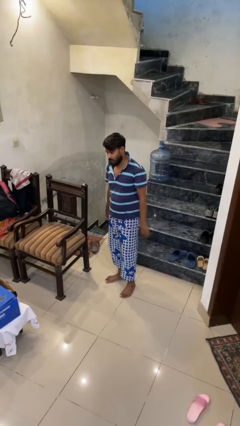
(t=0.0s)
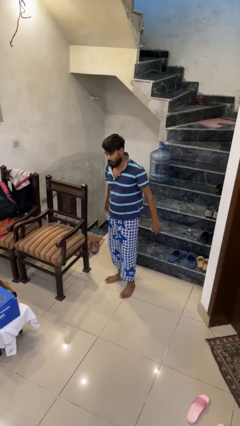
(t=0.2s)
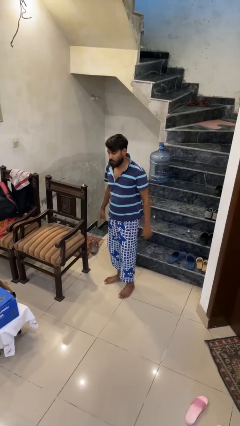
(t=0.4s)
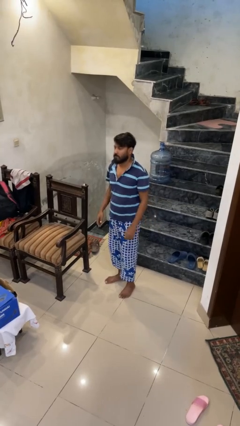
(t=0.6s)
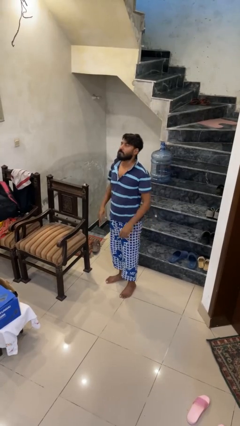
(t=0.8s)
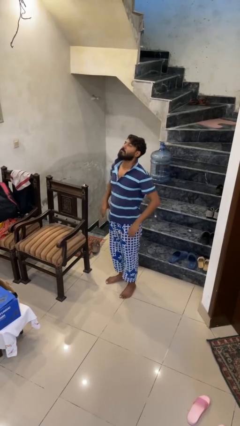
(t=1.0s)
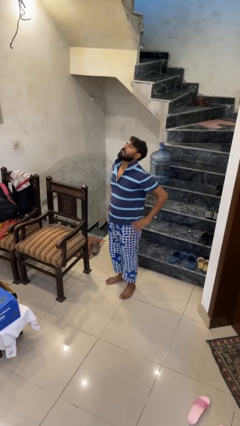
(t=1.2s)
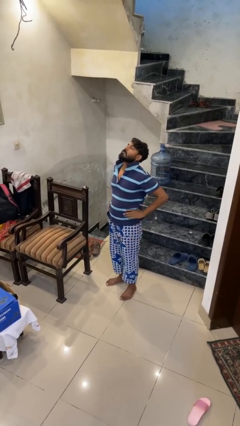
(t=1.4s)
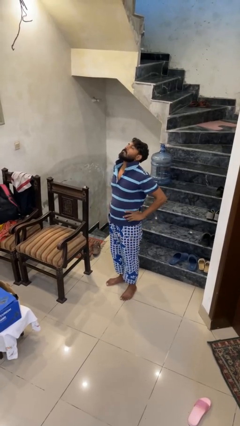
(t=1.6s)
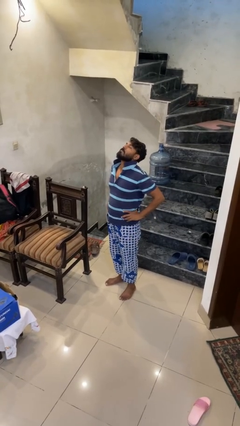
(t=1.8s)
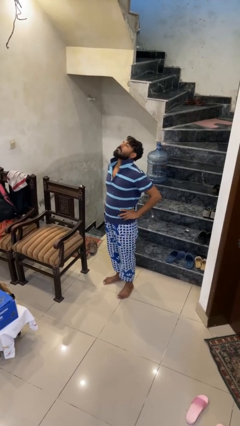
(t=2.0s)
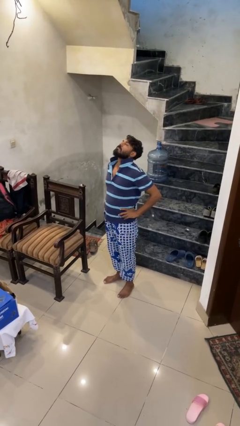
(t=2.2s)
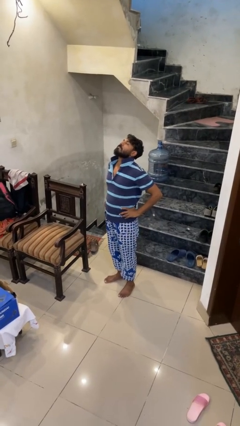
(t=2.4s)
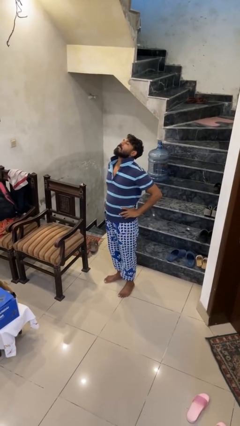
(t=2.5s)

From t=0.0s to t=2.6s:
person stretches back

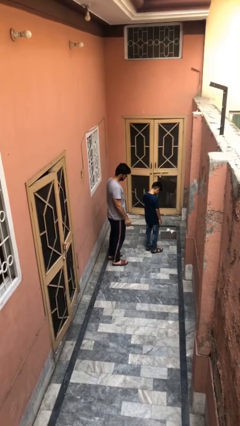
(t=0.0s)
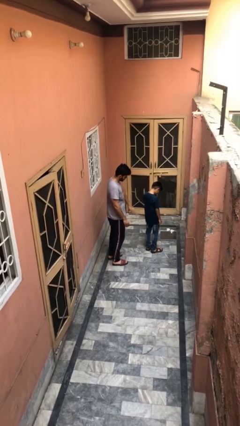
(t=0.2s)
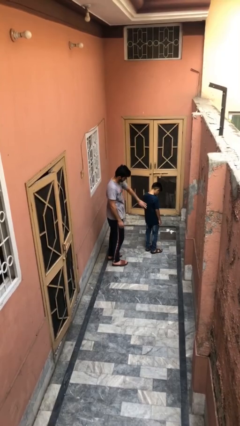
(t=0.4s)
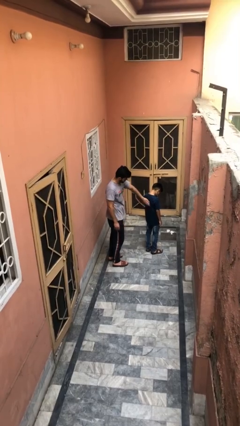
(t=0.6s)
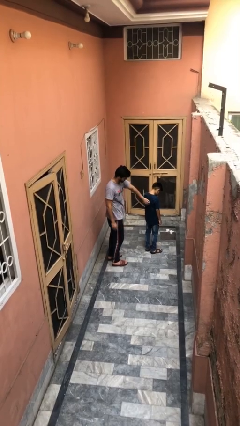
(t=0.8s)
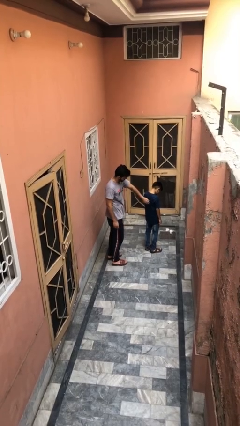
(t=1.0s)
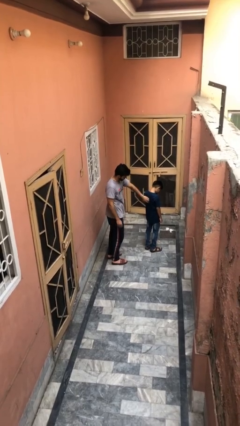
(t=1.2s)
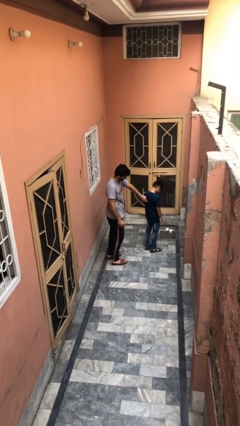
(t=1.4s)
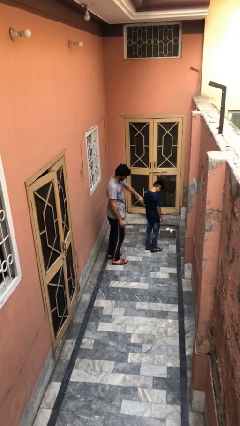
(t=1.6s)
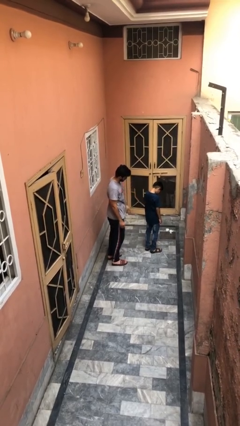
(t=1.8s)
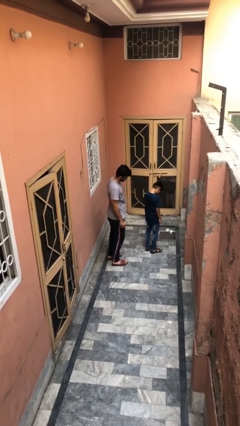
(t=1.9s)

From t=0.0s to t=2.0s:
person touches back of person

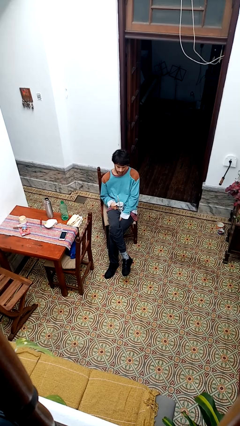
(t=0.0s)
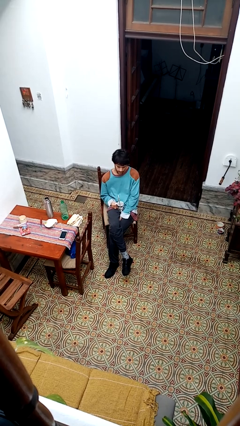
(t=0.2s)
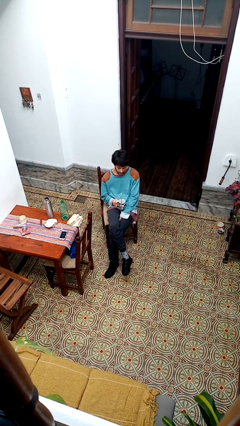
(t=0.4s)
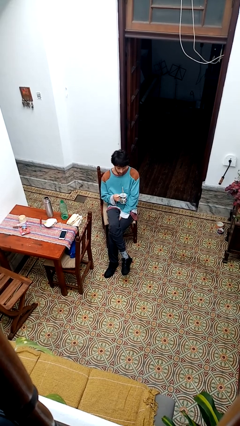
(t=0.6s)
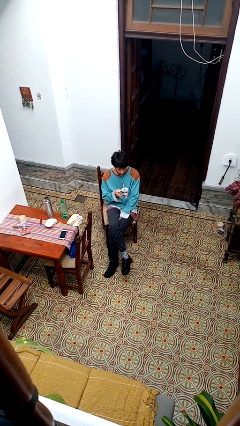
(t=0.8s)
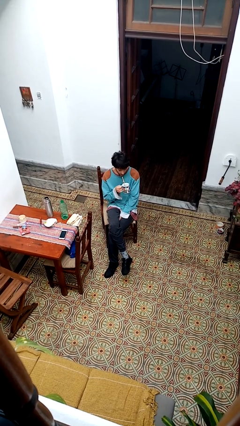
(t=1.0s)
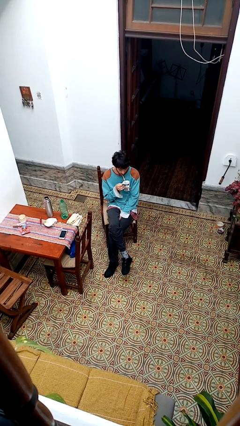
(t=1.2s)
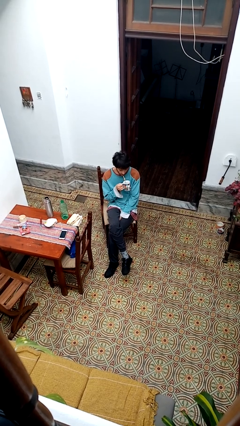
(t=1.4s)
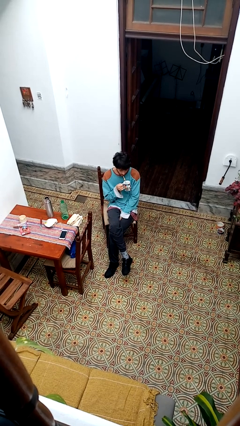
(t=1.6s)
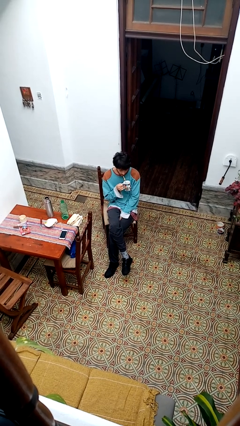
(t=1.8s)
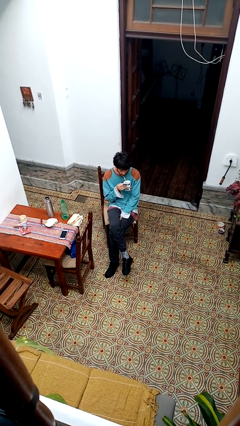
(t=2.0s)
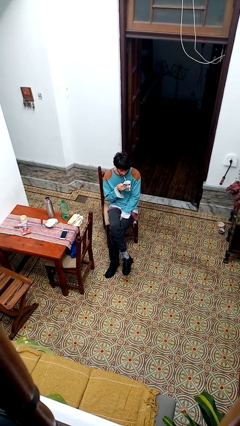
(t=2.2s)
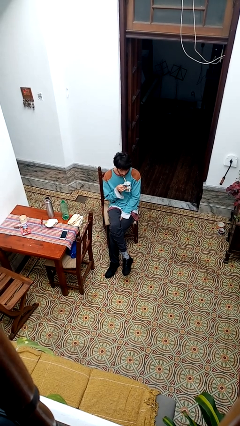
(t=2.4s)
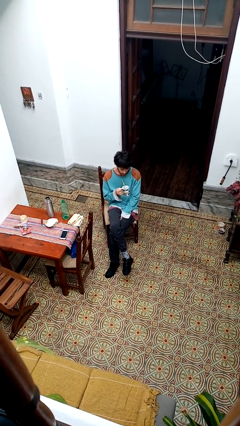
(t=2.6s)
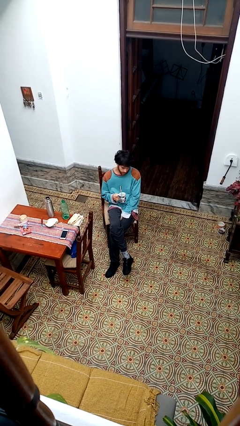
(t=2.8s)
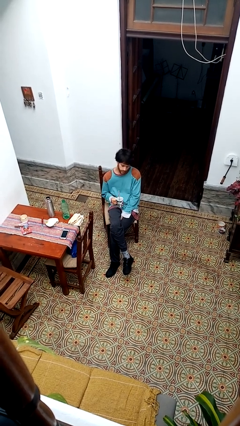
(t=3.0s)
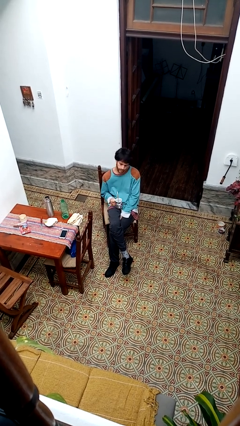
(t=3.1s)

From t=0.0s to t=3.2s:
person drinks from straw

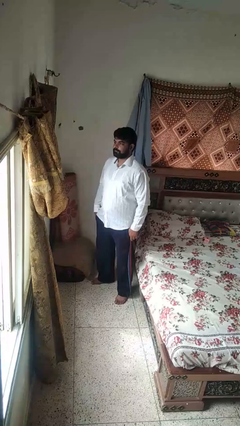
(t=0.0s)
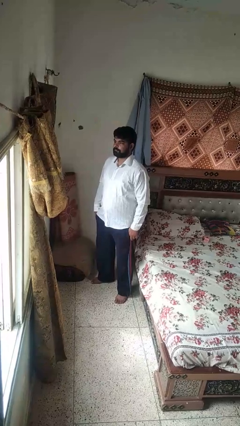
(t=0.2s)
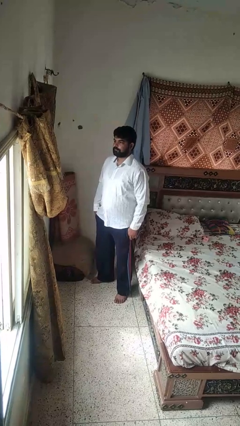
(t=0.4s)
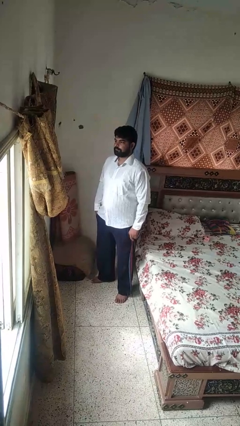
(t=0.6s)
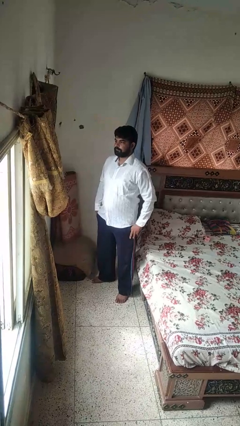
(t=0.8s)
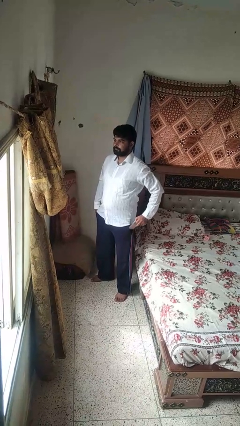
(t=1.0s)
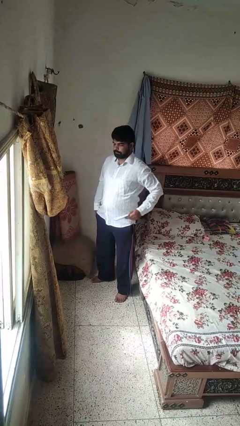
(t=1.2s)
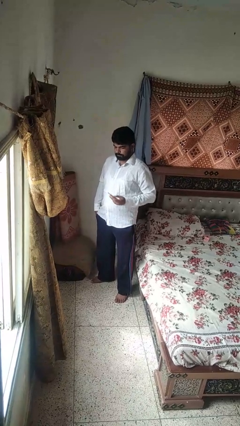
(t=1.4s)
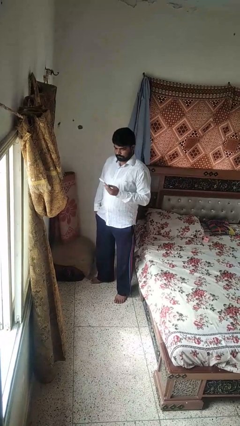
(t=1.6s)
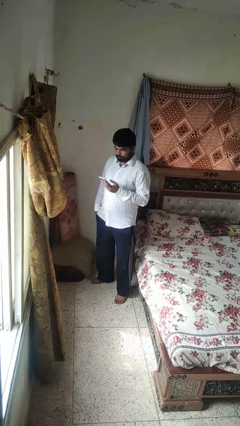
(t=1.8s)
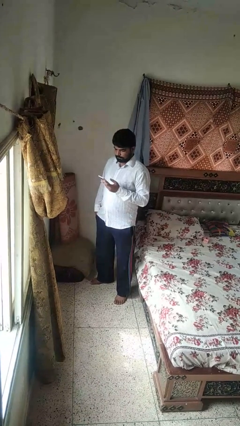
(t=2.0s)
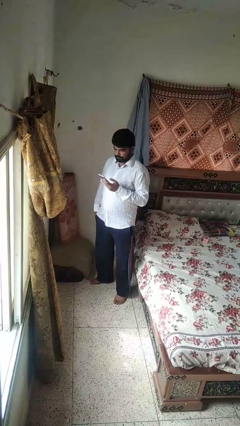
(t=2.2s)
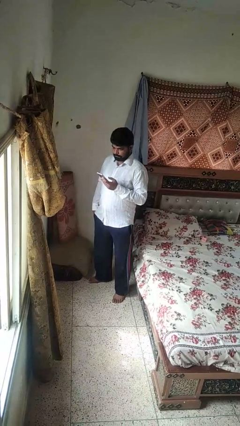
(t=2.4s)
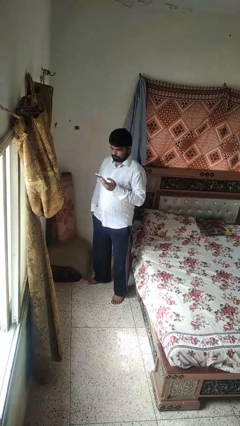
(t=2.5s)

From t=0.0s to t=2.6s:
person takes phone from pocket

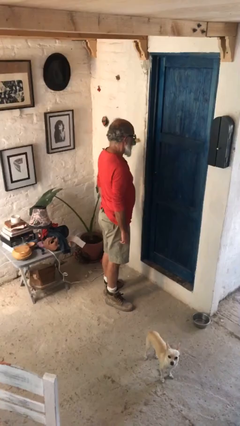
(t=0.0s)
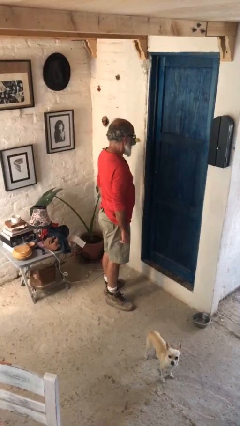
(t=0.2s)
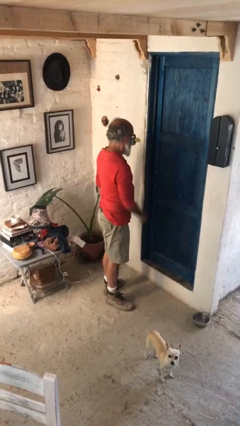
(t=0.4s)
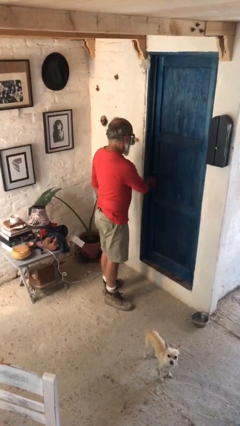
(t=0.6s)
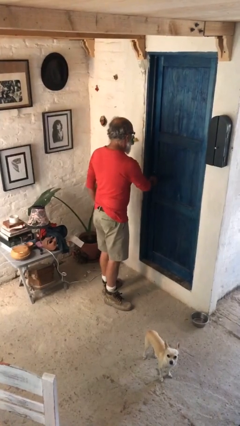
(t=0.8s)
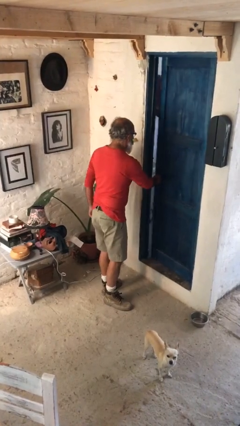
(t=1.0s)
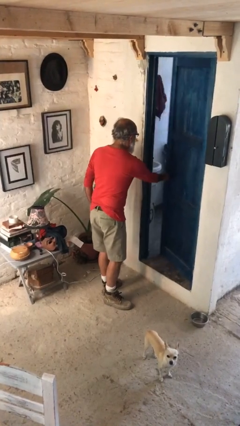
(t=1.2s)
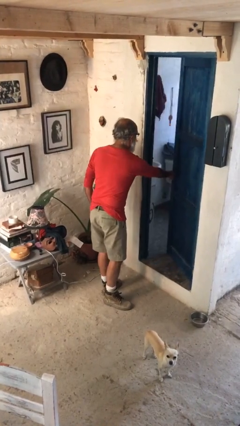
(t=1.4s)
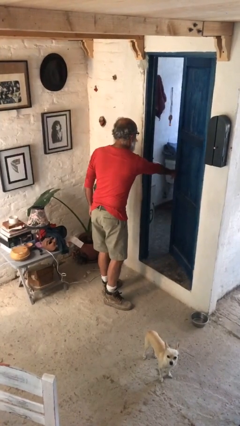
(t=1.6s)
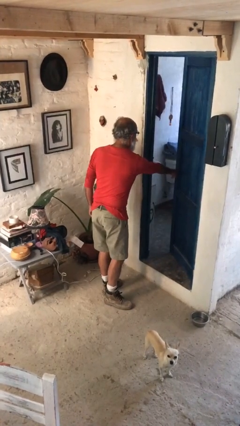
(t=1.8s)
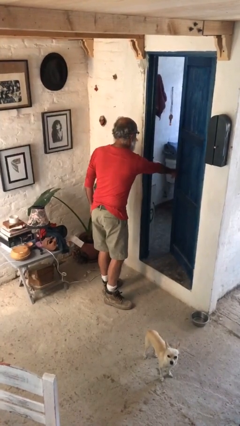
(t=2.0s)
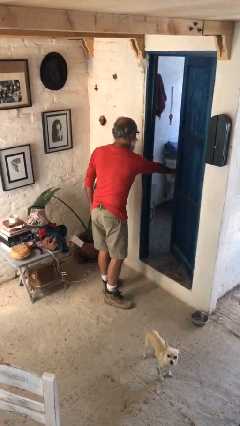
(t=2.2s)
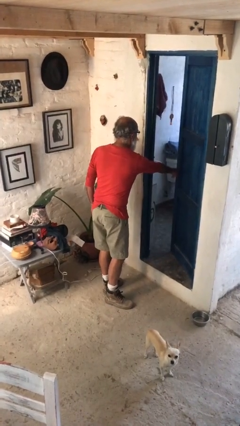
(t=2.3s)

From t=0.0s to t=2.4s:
person opens facility door

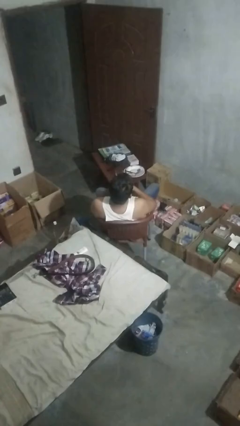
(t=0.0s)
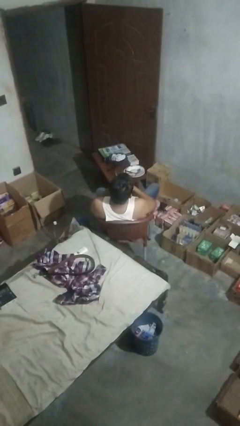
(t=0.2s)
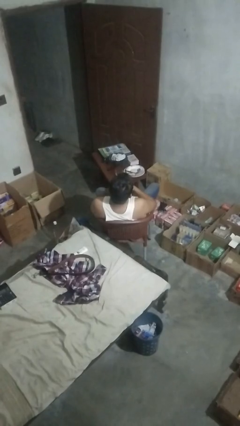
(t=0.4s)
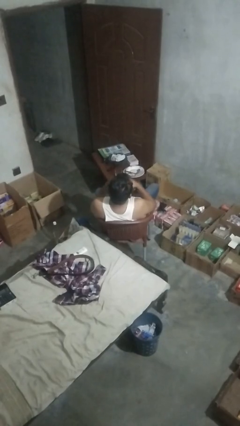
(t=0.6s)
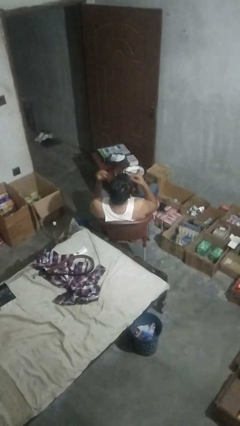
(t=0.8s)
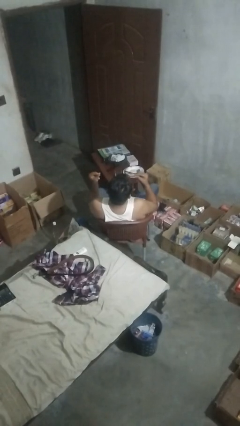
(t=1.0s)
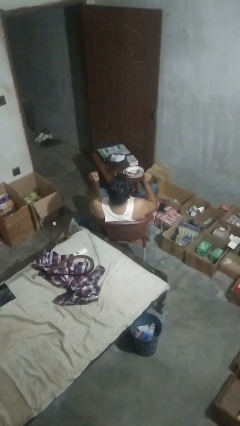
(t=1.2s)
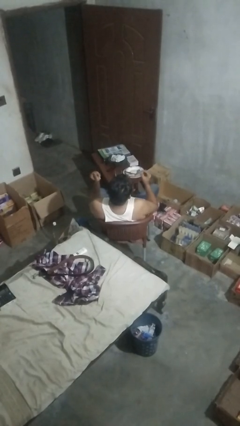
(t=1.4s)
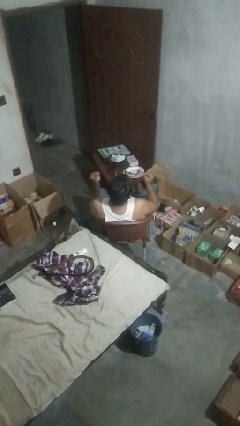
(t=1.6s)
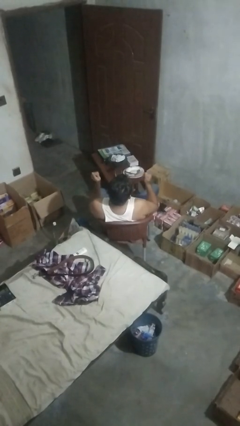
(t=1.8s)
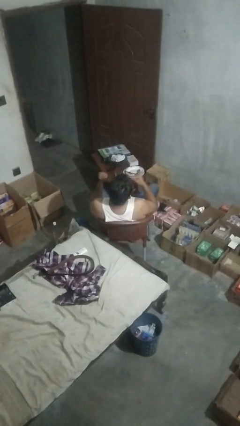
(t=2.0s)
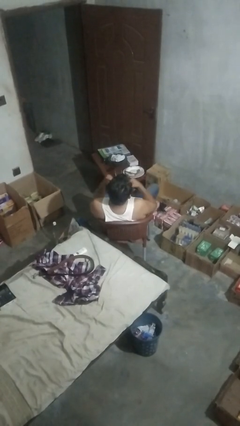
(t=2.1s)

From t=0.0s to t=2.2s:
person snaps fingers

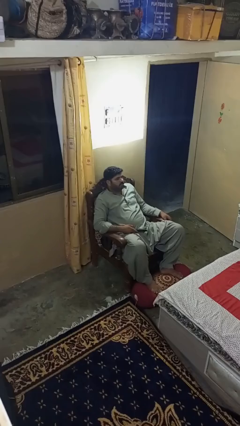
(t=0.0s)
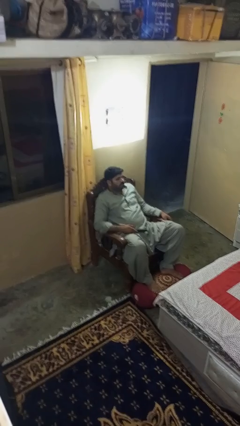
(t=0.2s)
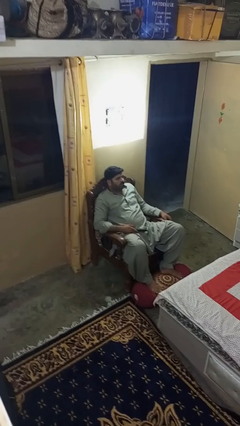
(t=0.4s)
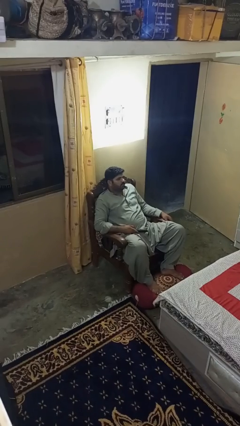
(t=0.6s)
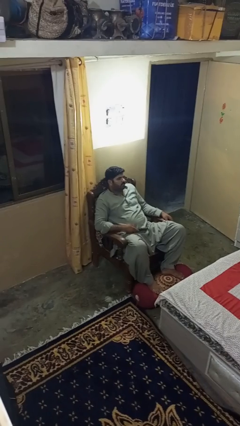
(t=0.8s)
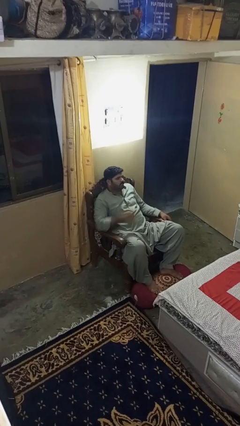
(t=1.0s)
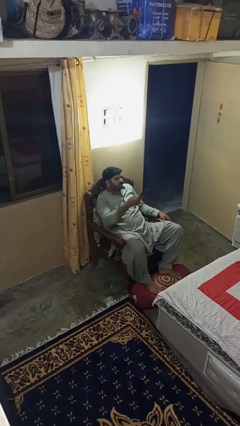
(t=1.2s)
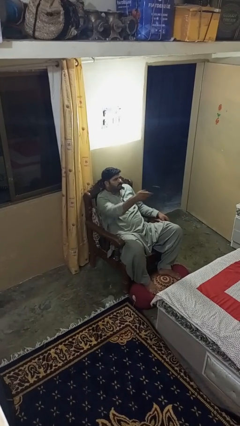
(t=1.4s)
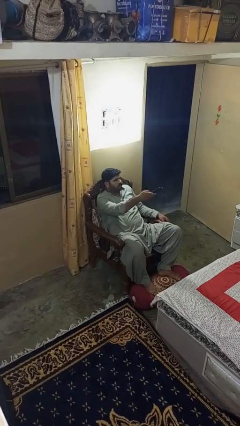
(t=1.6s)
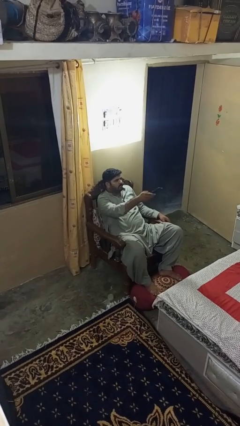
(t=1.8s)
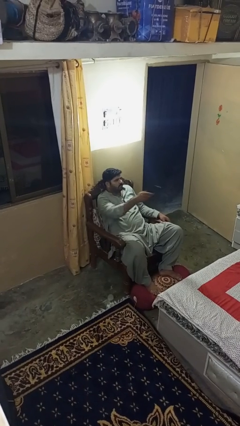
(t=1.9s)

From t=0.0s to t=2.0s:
person uses television remote
